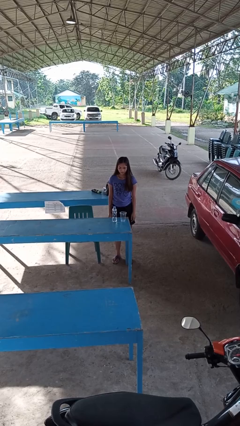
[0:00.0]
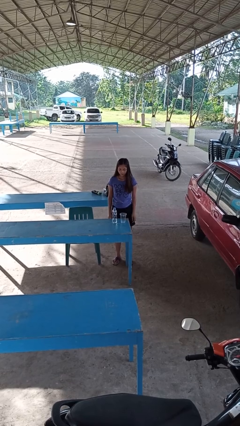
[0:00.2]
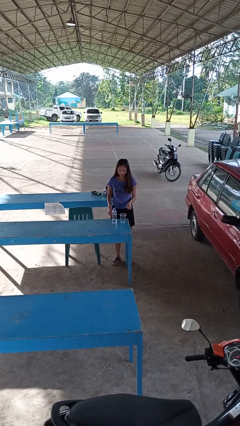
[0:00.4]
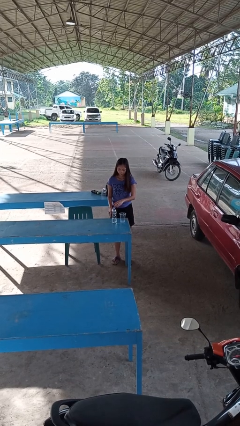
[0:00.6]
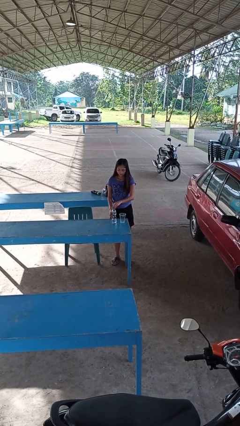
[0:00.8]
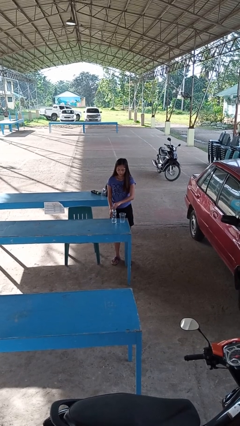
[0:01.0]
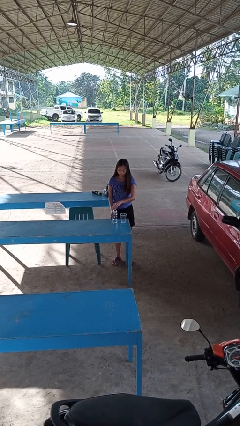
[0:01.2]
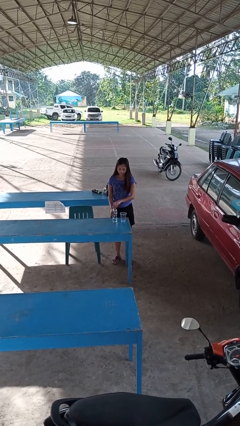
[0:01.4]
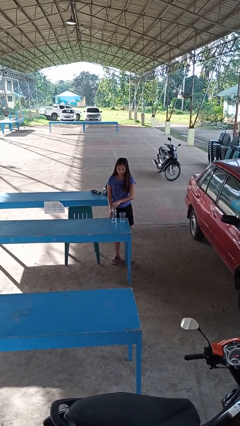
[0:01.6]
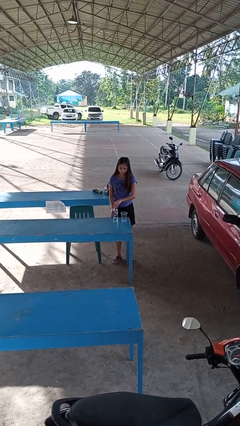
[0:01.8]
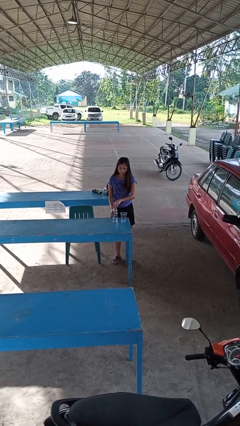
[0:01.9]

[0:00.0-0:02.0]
person unscrews lid from bottle

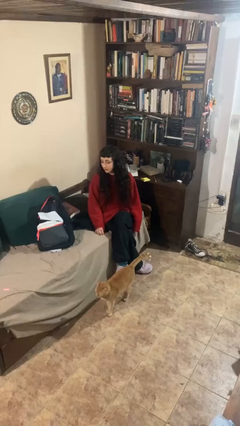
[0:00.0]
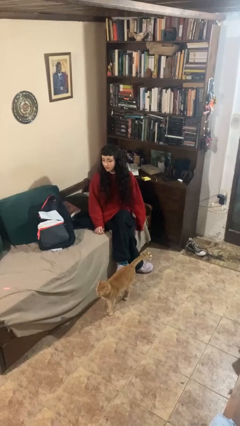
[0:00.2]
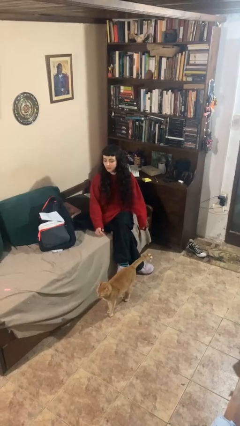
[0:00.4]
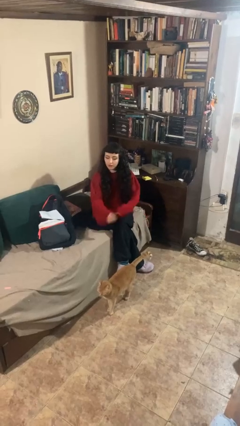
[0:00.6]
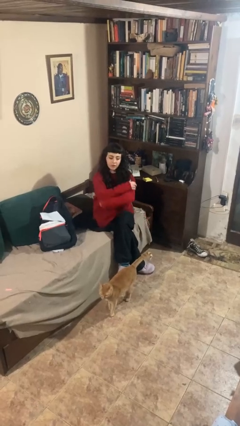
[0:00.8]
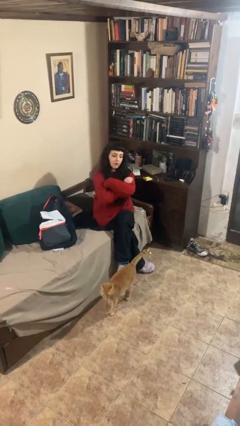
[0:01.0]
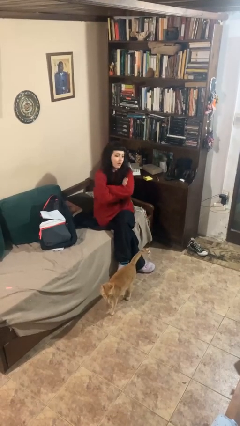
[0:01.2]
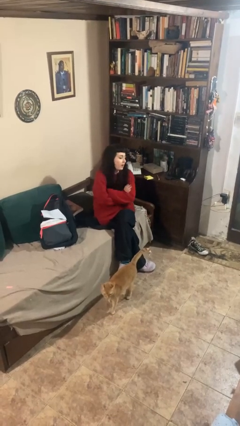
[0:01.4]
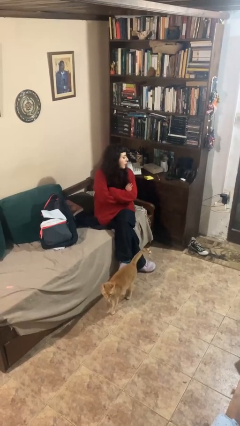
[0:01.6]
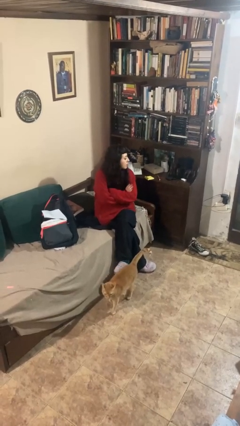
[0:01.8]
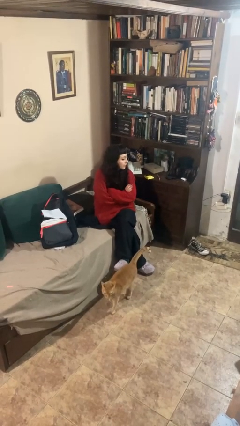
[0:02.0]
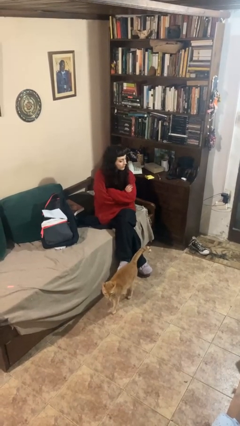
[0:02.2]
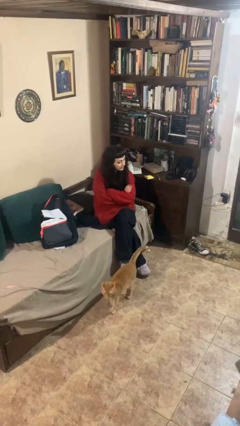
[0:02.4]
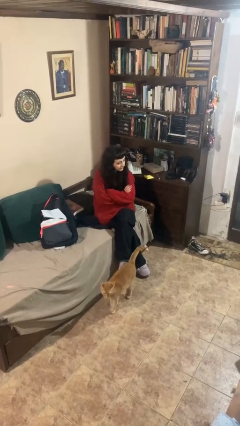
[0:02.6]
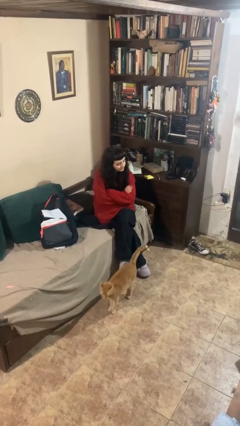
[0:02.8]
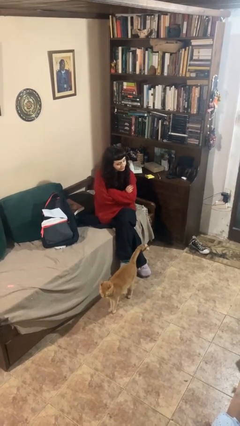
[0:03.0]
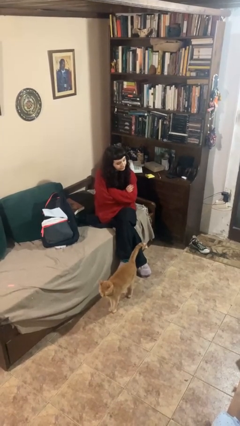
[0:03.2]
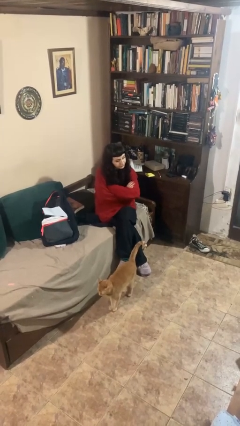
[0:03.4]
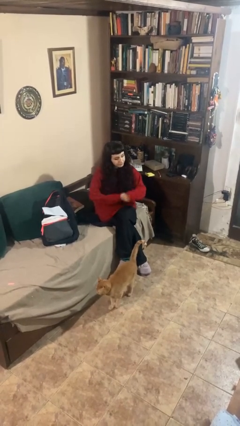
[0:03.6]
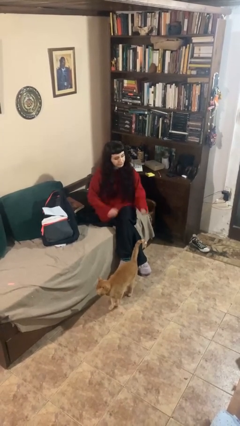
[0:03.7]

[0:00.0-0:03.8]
person crosses arms

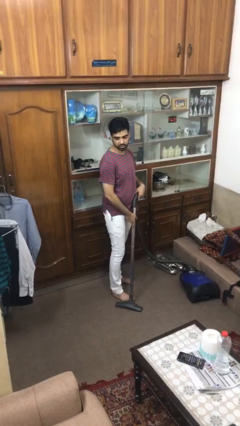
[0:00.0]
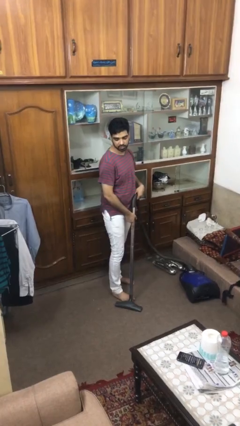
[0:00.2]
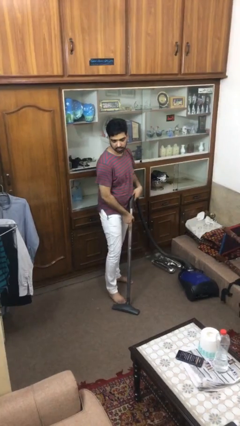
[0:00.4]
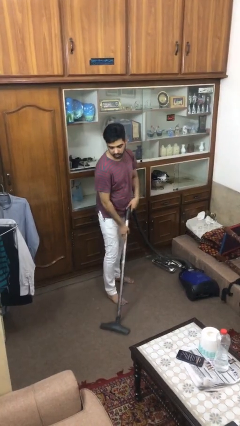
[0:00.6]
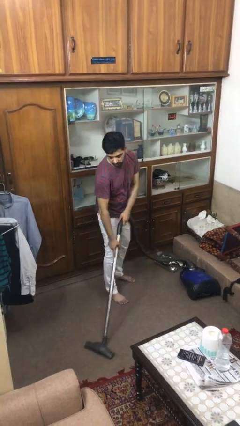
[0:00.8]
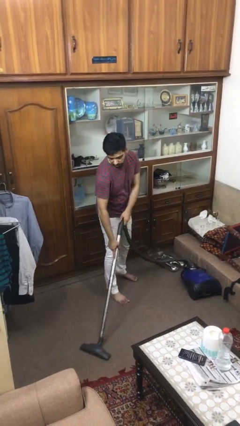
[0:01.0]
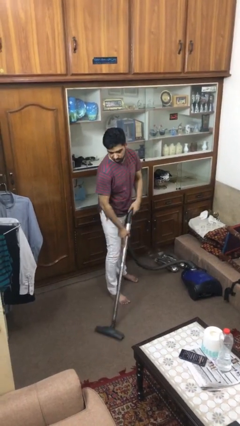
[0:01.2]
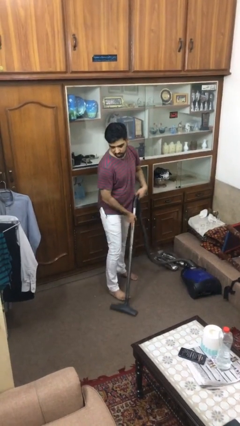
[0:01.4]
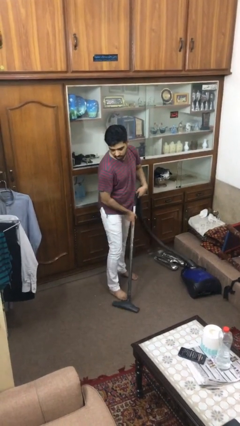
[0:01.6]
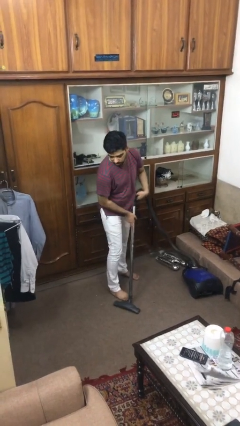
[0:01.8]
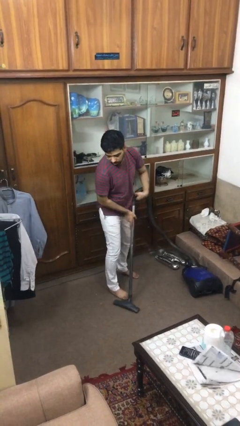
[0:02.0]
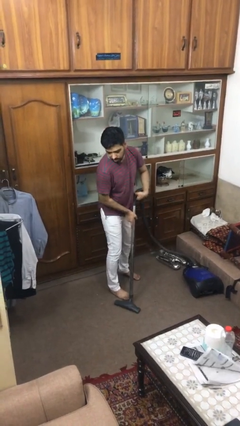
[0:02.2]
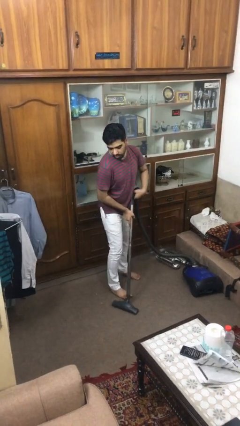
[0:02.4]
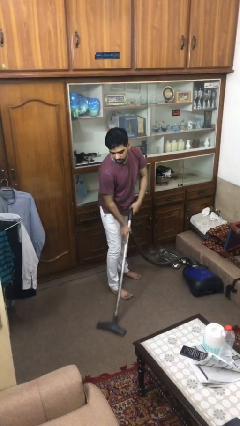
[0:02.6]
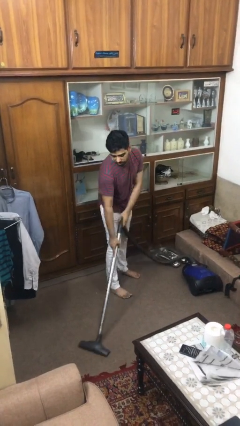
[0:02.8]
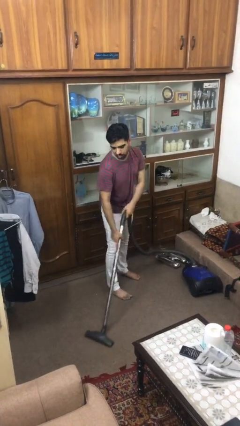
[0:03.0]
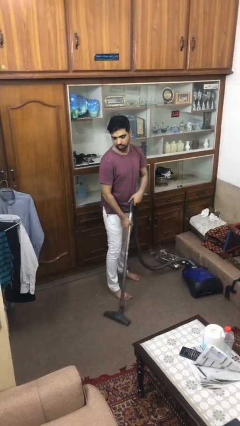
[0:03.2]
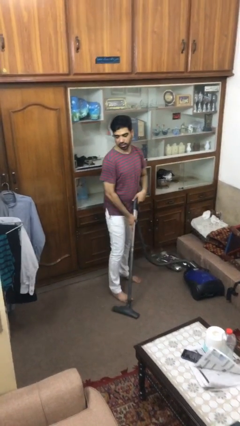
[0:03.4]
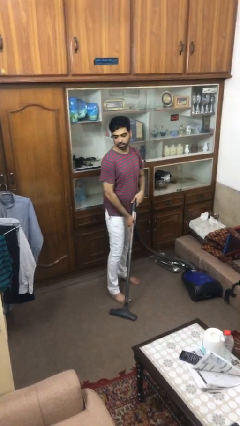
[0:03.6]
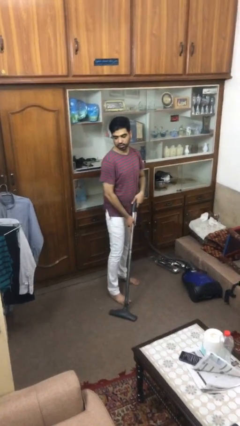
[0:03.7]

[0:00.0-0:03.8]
person vacuums carpet

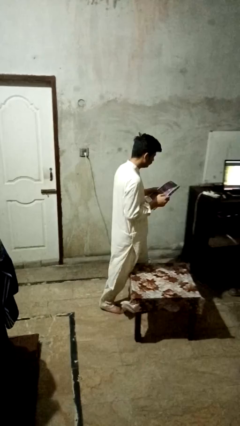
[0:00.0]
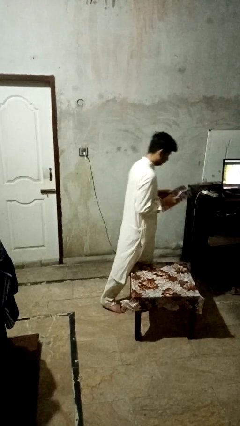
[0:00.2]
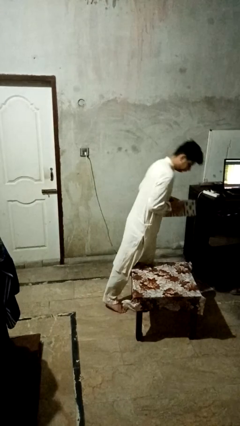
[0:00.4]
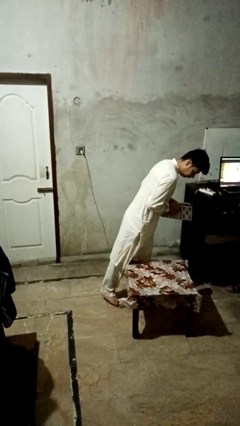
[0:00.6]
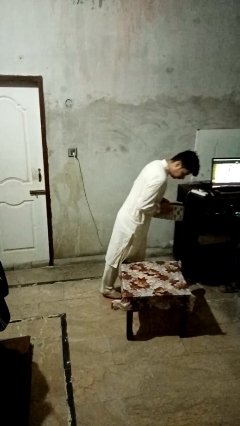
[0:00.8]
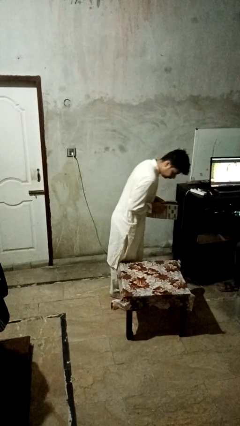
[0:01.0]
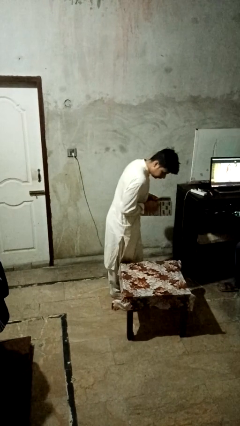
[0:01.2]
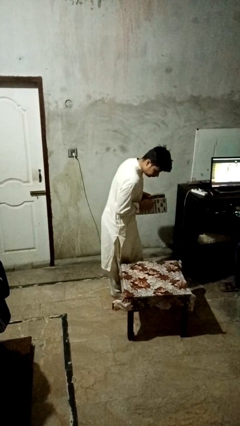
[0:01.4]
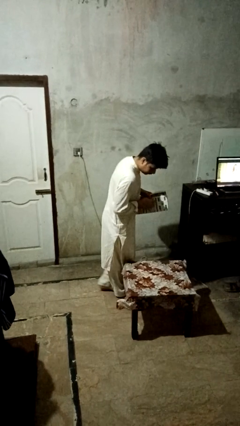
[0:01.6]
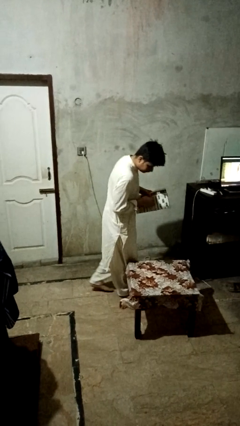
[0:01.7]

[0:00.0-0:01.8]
person bumps into table

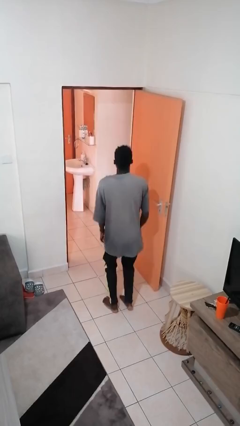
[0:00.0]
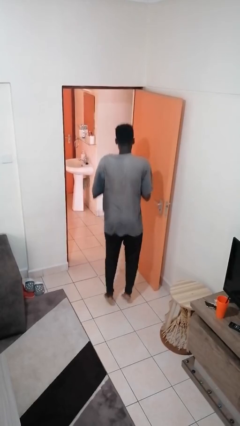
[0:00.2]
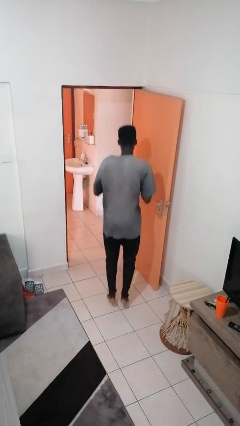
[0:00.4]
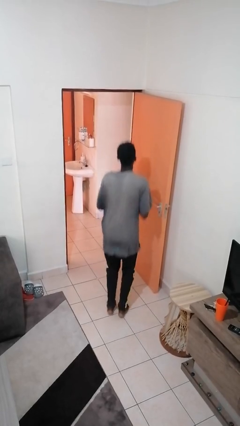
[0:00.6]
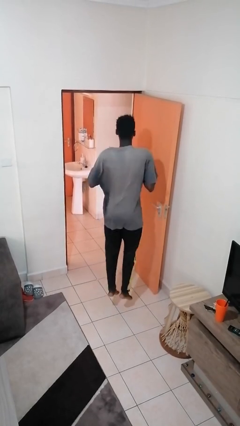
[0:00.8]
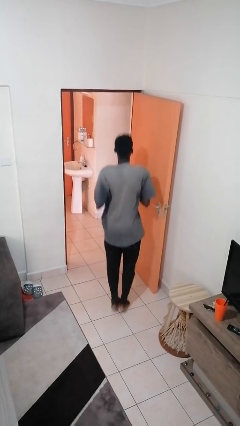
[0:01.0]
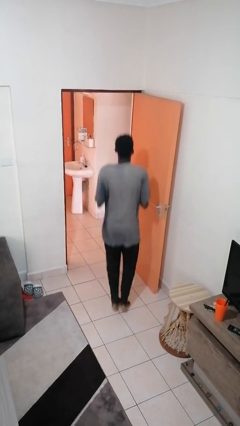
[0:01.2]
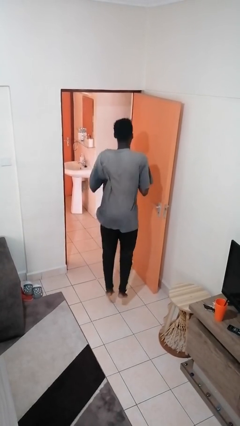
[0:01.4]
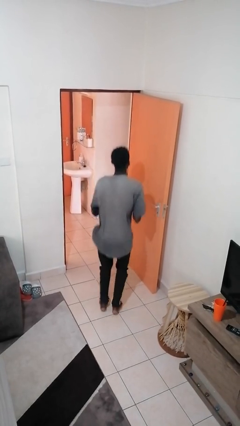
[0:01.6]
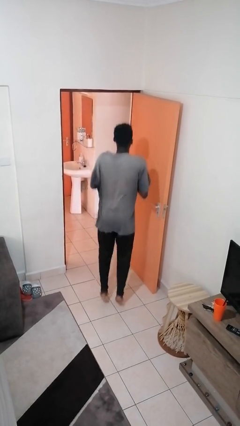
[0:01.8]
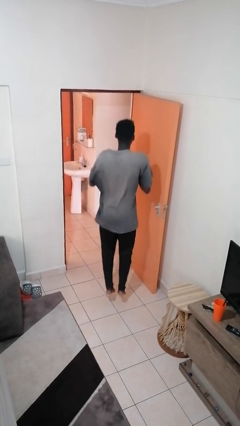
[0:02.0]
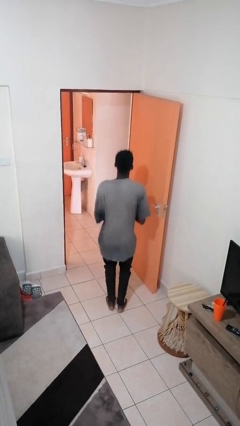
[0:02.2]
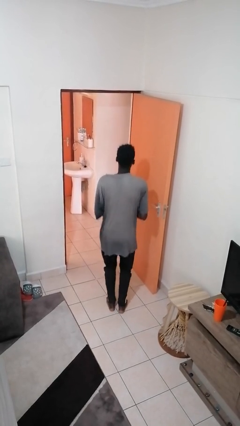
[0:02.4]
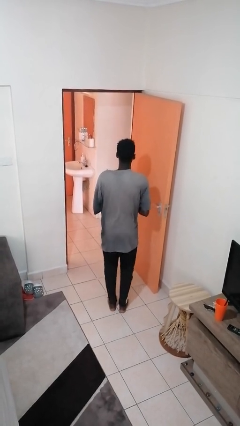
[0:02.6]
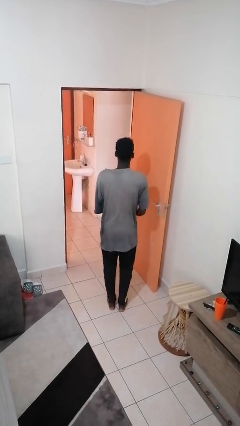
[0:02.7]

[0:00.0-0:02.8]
person jumps

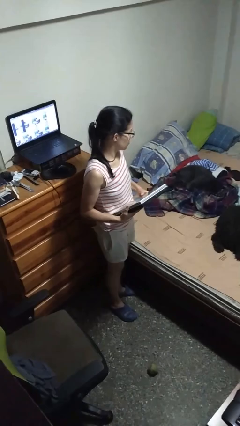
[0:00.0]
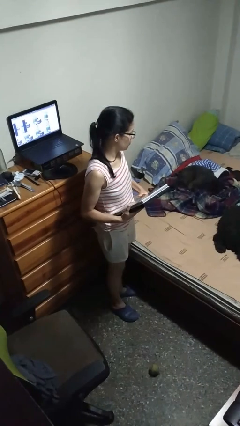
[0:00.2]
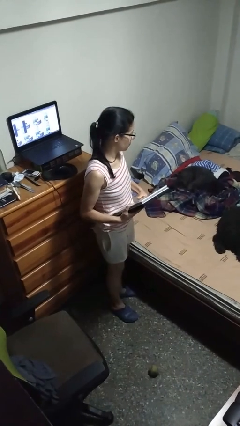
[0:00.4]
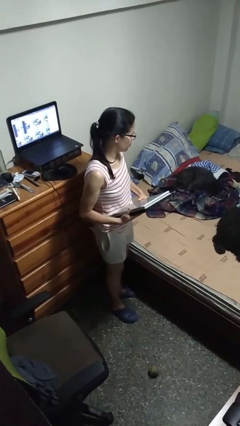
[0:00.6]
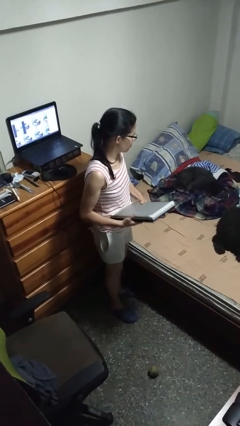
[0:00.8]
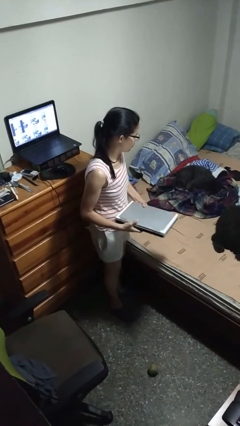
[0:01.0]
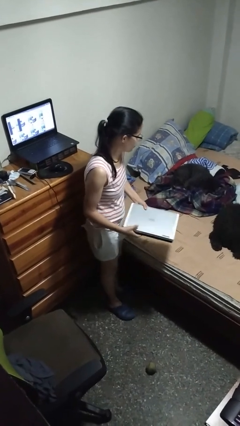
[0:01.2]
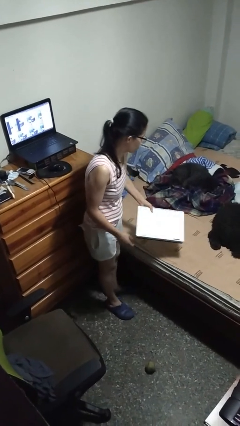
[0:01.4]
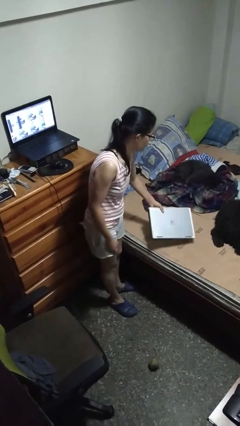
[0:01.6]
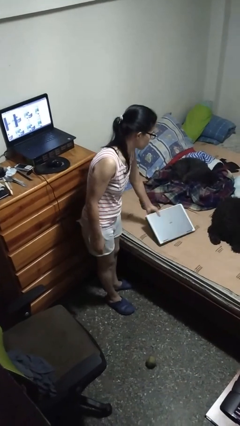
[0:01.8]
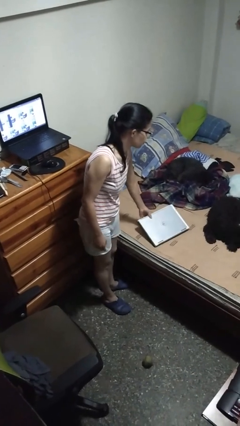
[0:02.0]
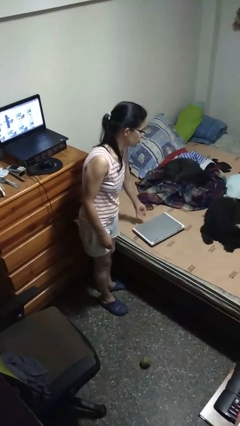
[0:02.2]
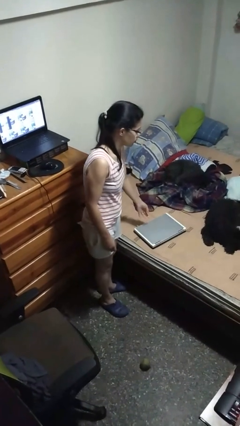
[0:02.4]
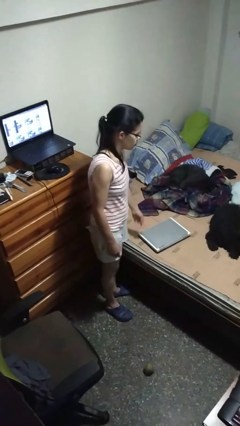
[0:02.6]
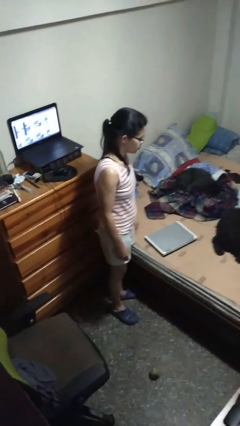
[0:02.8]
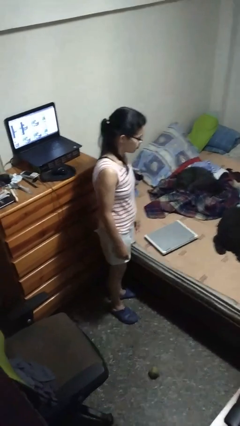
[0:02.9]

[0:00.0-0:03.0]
person puts down object on bed

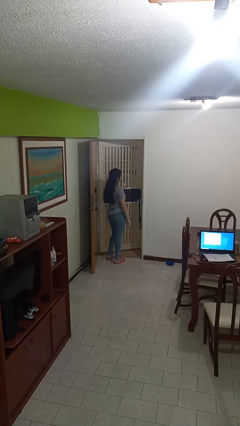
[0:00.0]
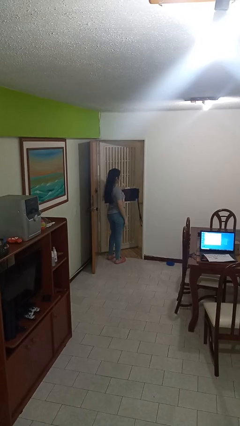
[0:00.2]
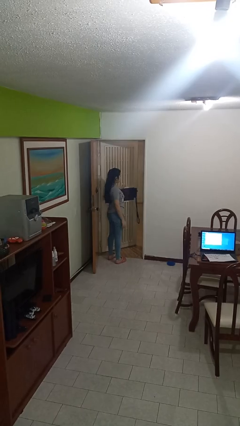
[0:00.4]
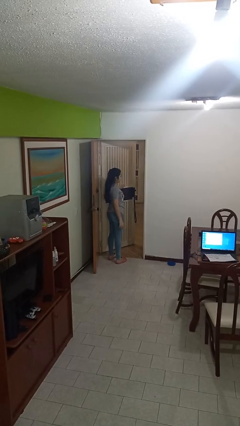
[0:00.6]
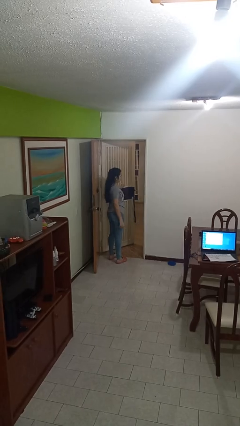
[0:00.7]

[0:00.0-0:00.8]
person opens facility door
